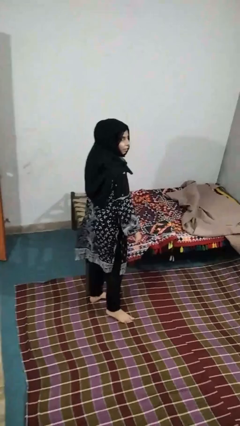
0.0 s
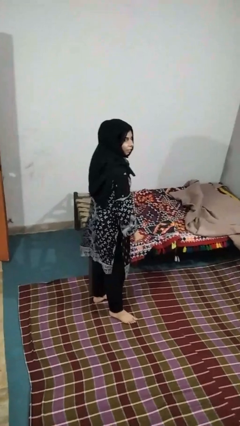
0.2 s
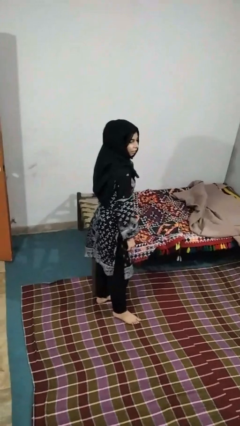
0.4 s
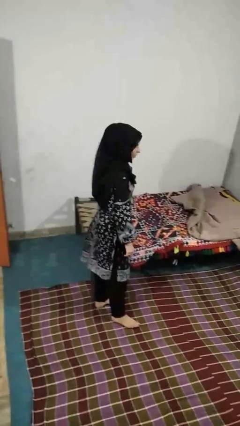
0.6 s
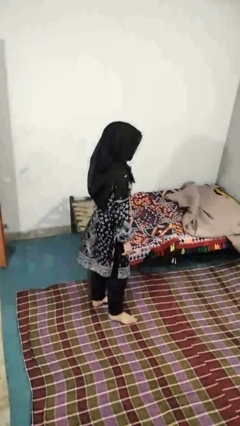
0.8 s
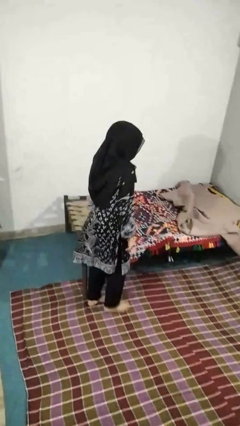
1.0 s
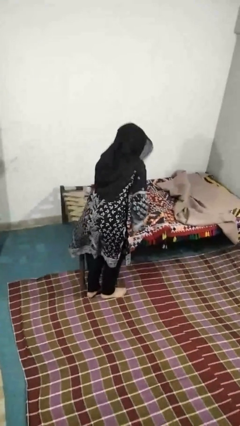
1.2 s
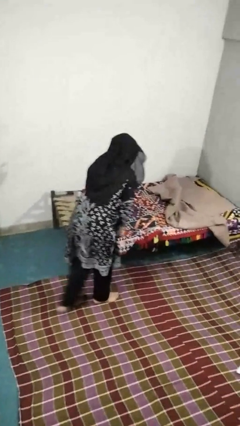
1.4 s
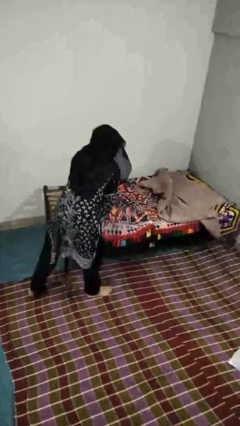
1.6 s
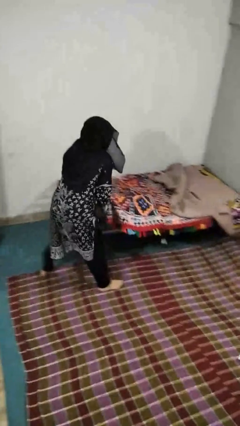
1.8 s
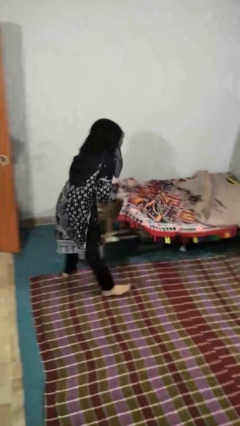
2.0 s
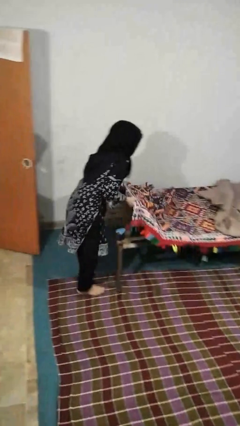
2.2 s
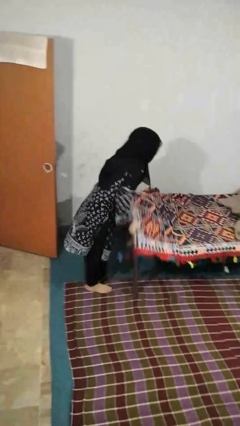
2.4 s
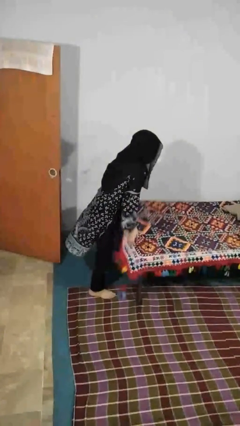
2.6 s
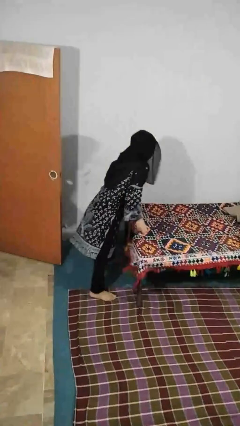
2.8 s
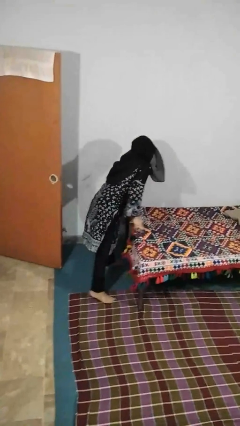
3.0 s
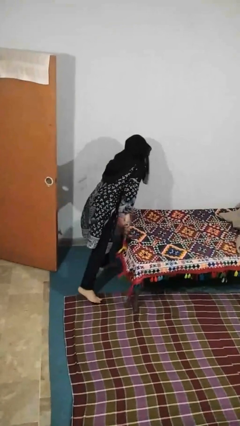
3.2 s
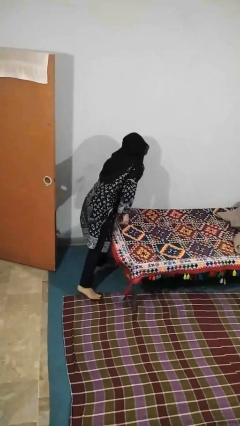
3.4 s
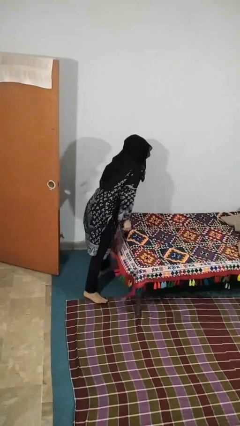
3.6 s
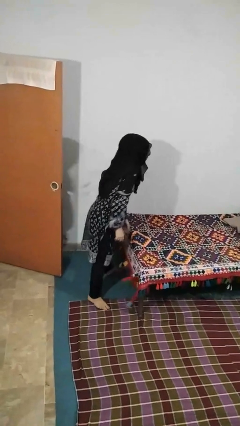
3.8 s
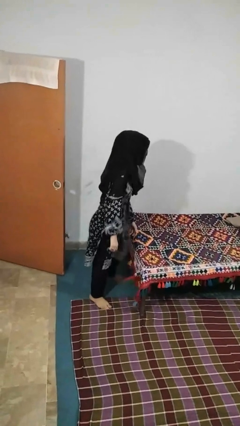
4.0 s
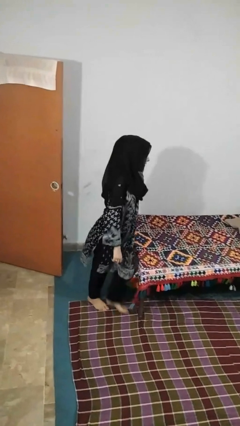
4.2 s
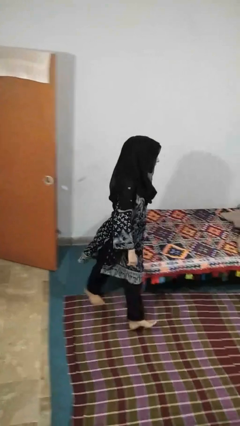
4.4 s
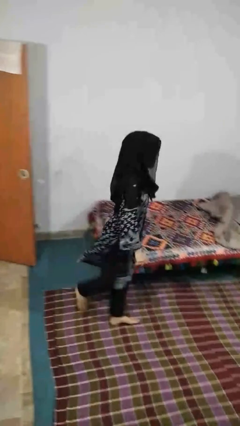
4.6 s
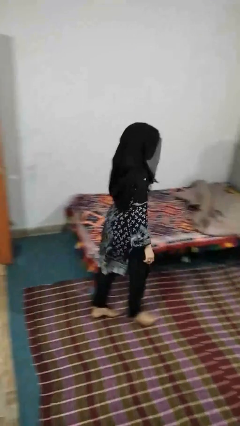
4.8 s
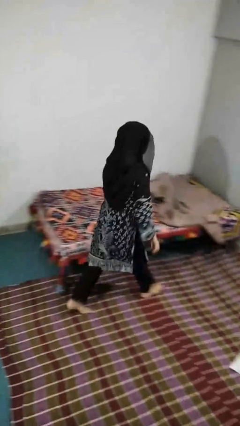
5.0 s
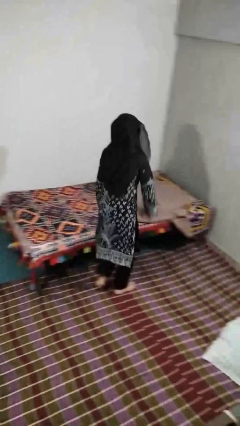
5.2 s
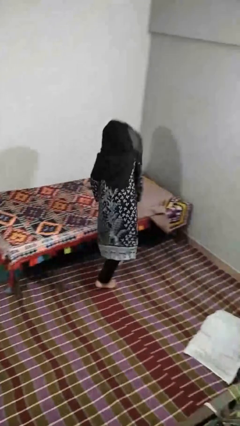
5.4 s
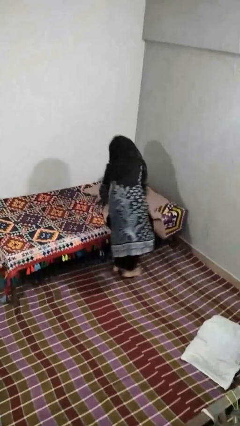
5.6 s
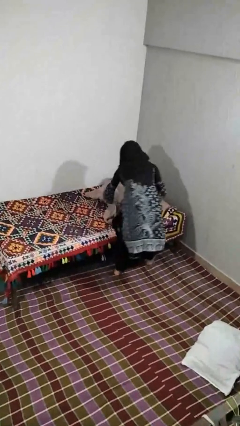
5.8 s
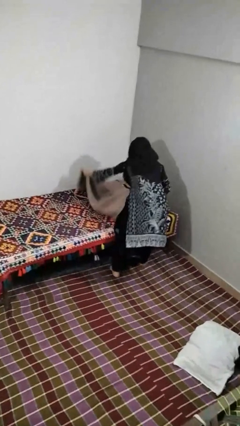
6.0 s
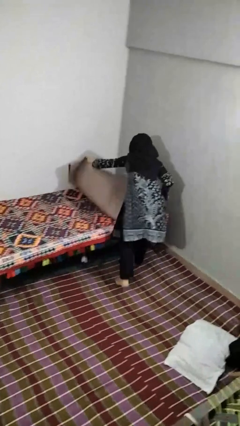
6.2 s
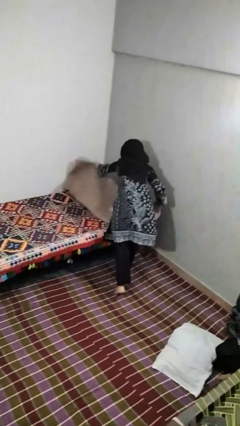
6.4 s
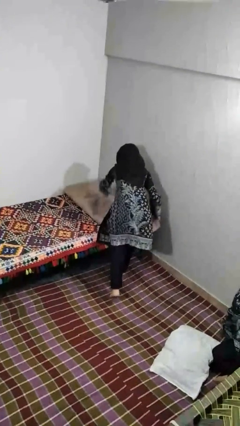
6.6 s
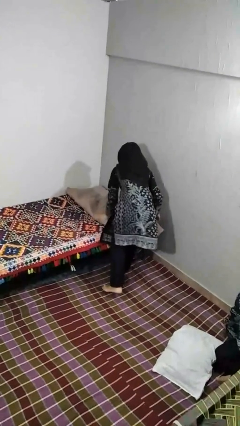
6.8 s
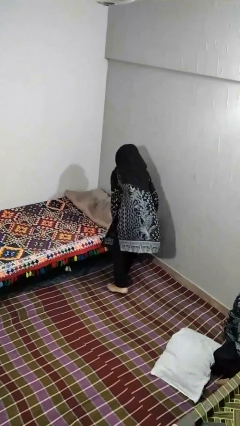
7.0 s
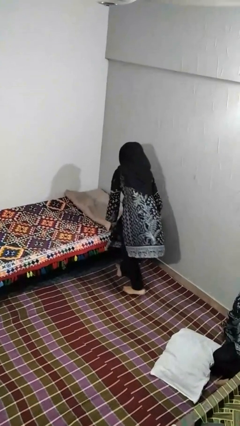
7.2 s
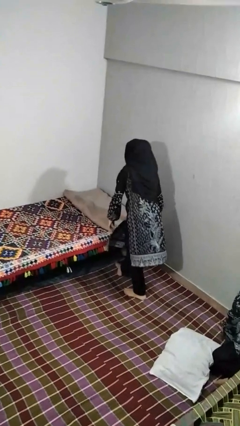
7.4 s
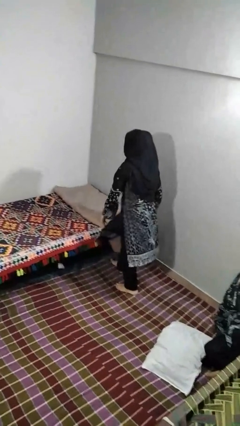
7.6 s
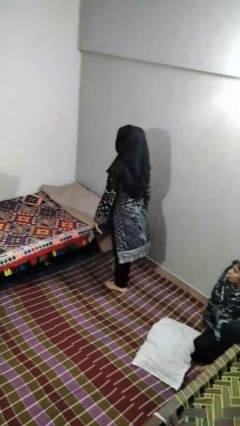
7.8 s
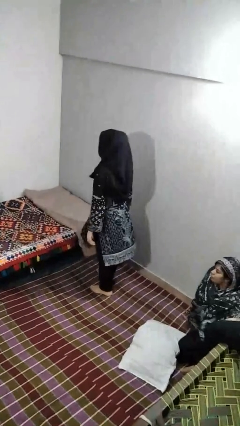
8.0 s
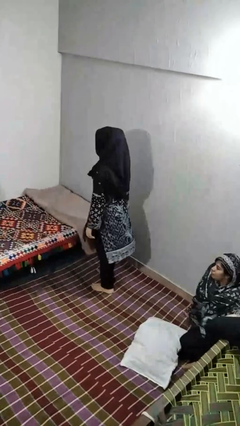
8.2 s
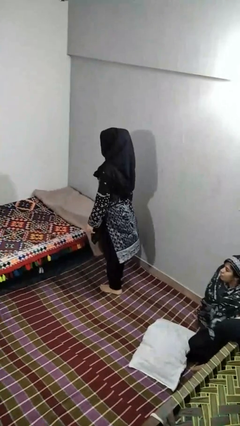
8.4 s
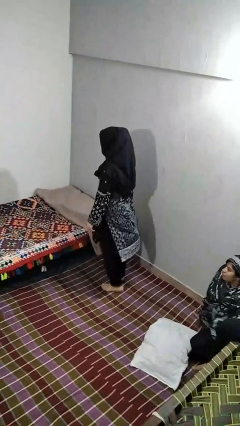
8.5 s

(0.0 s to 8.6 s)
person makes bed

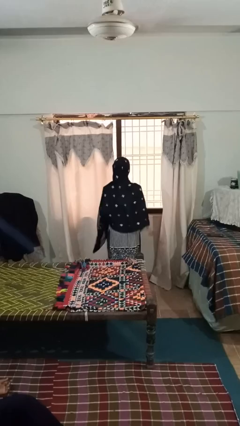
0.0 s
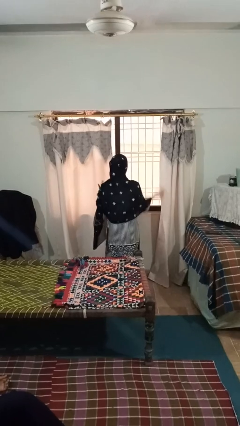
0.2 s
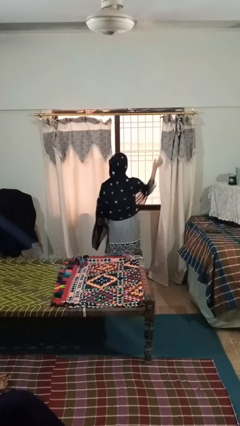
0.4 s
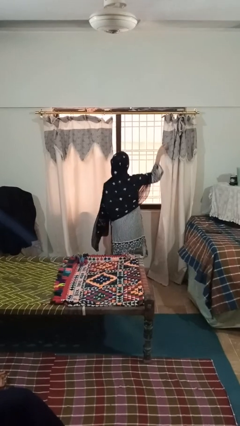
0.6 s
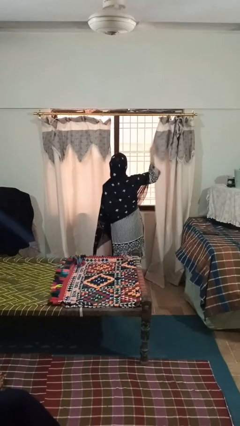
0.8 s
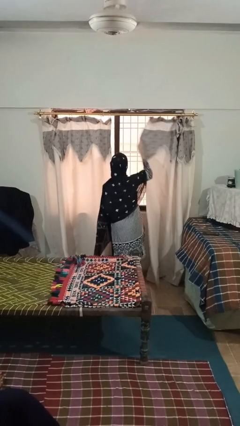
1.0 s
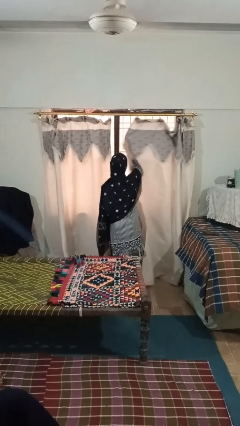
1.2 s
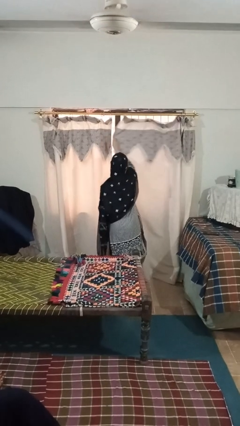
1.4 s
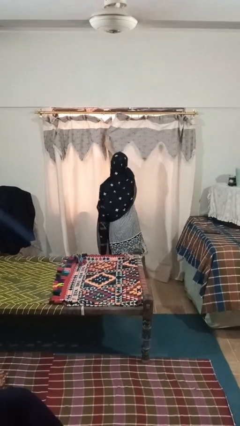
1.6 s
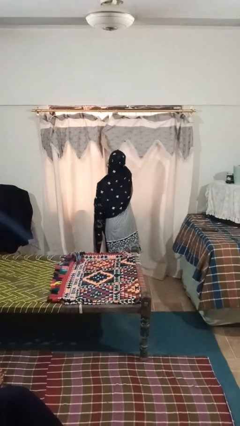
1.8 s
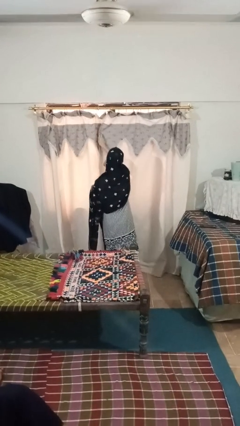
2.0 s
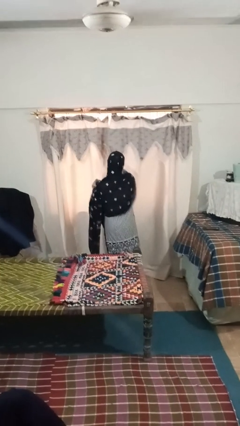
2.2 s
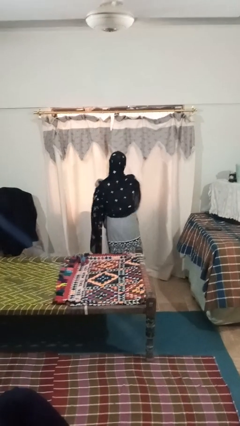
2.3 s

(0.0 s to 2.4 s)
person closes curtains

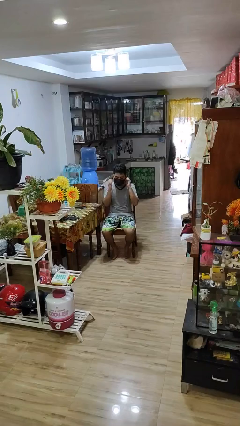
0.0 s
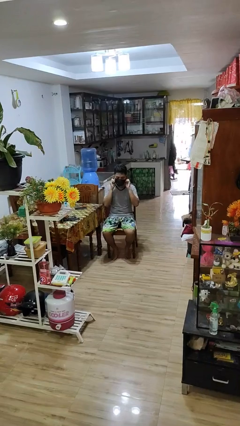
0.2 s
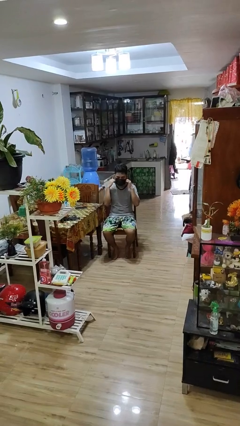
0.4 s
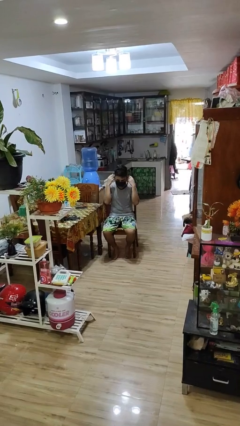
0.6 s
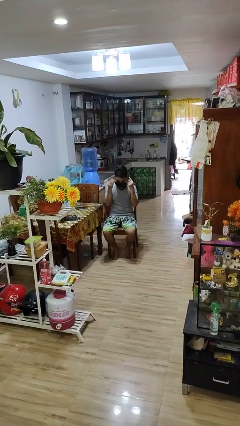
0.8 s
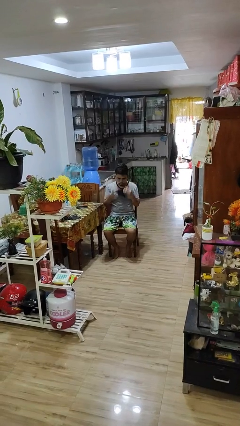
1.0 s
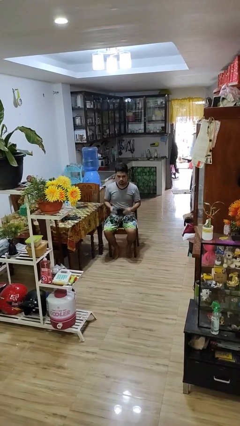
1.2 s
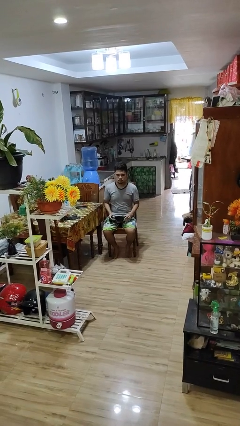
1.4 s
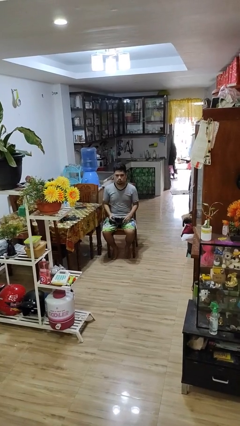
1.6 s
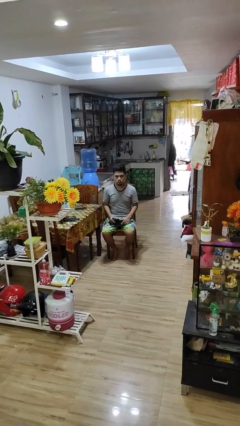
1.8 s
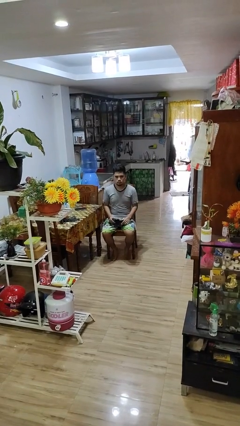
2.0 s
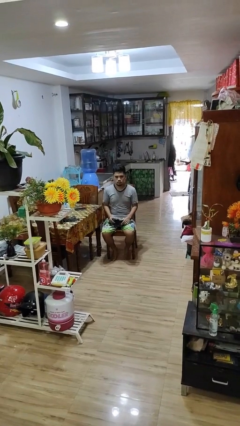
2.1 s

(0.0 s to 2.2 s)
person takes off facemask

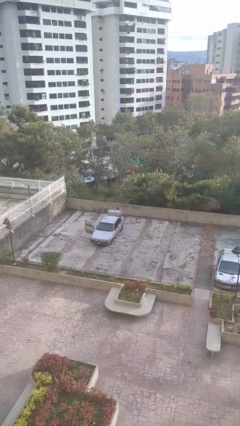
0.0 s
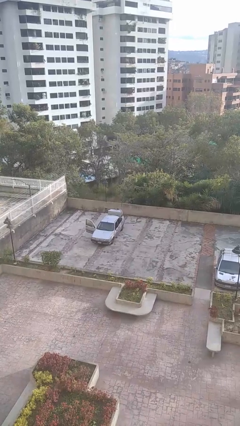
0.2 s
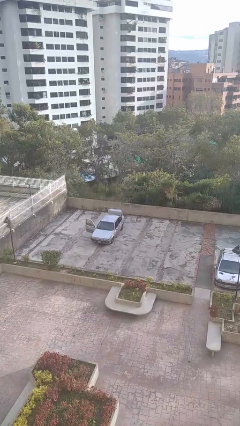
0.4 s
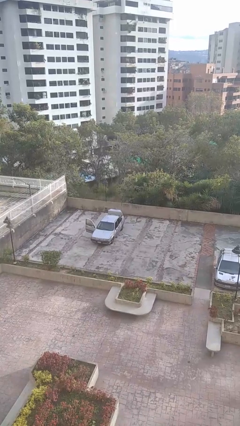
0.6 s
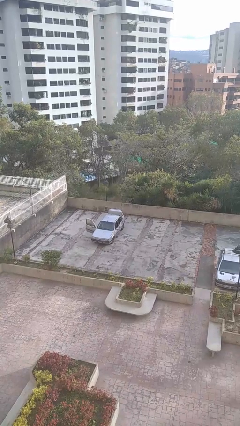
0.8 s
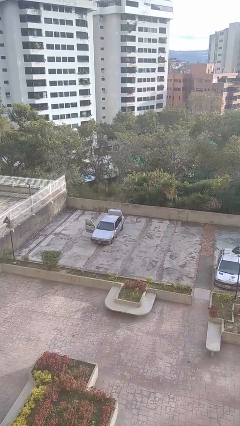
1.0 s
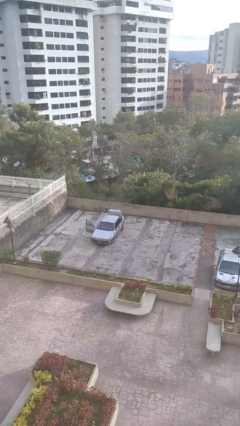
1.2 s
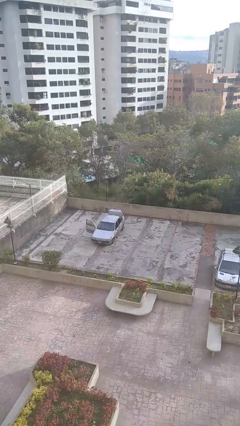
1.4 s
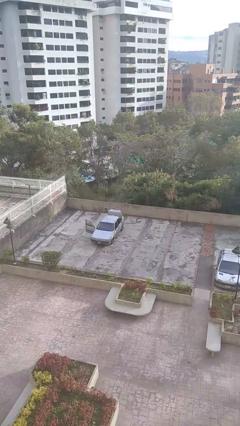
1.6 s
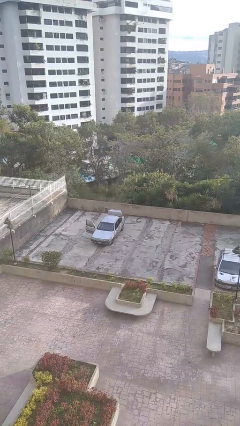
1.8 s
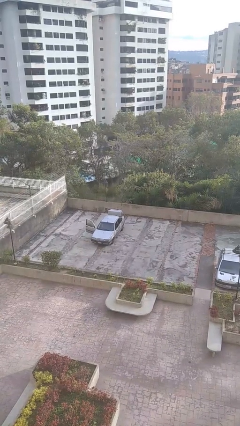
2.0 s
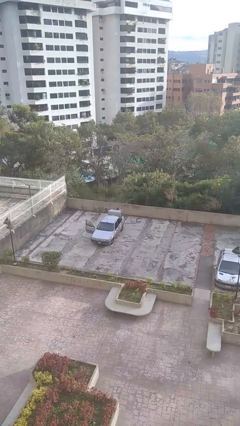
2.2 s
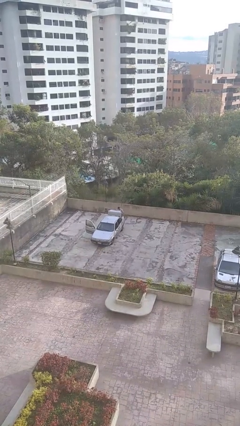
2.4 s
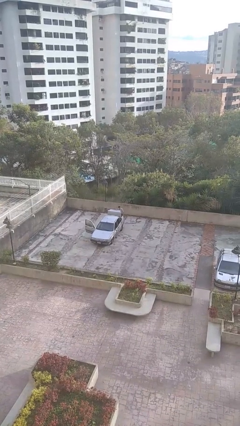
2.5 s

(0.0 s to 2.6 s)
person loads car

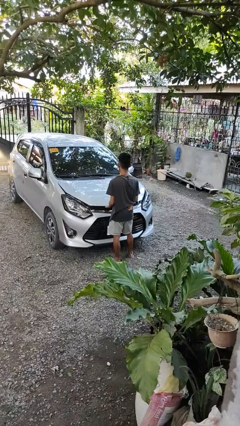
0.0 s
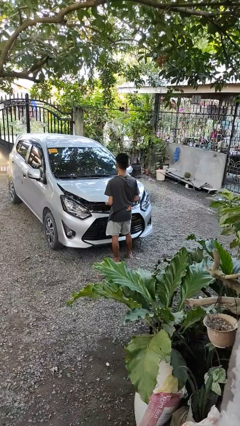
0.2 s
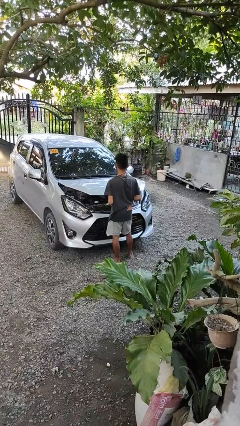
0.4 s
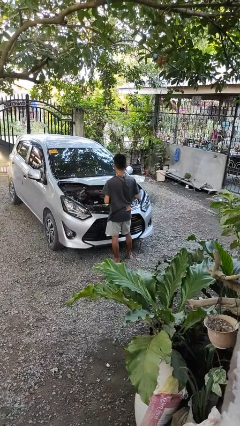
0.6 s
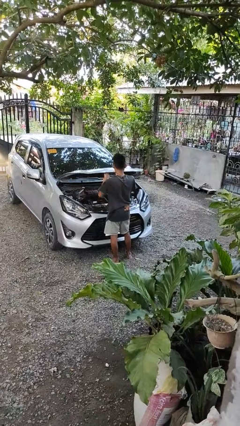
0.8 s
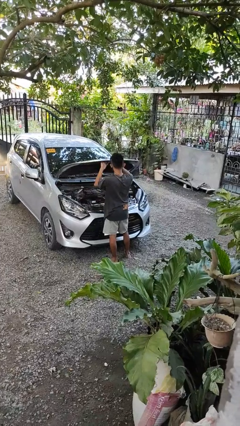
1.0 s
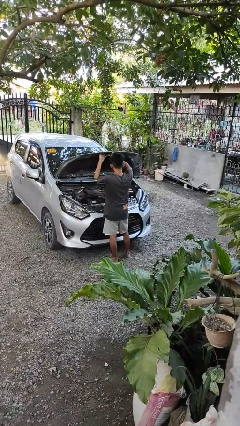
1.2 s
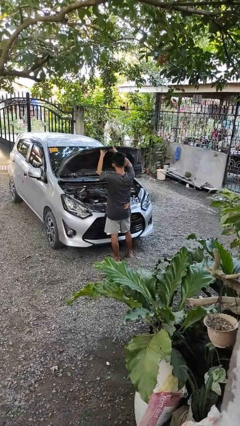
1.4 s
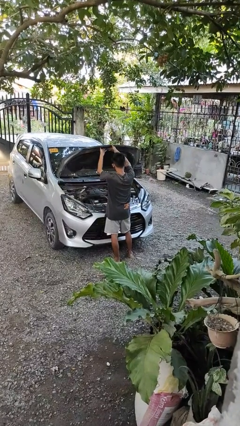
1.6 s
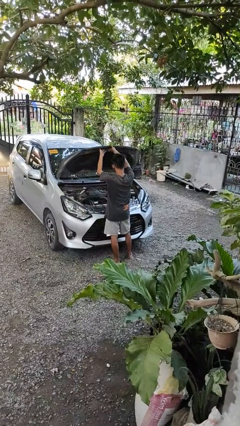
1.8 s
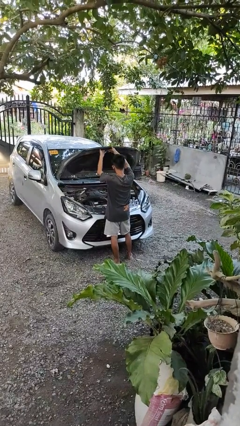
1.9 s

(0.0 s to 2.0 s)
person opens car hood
